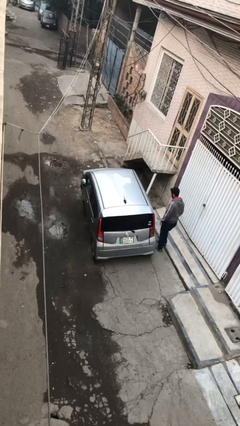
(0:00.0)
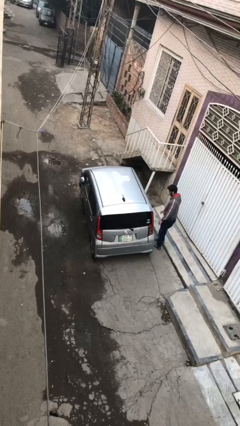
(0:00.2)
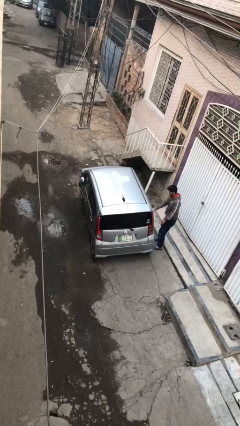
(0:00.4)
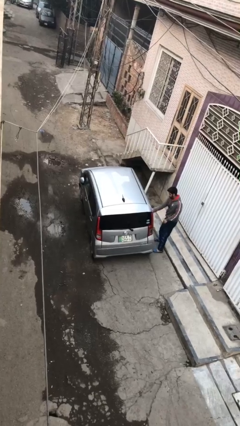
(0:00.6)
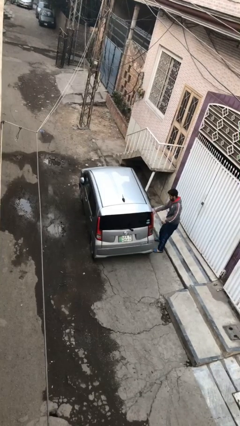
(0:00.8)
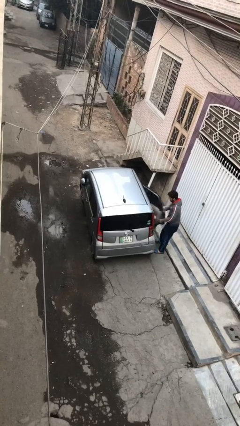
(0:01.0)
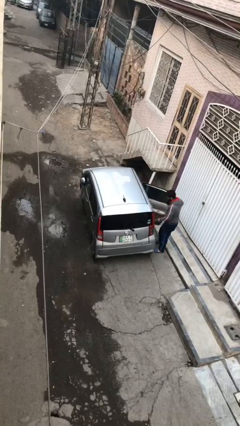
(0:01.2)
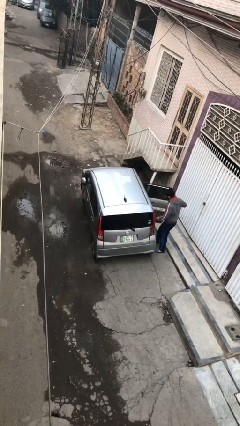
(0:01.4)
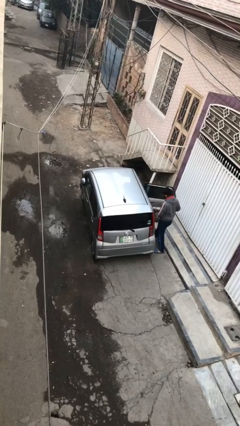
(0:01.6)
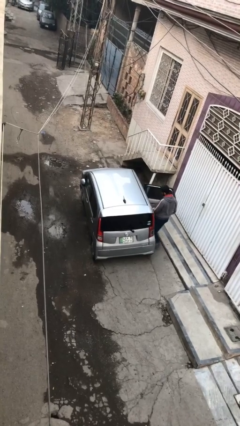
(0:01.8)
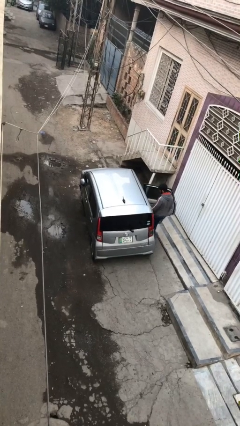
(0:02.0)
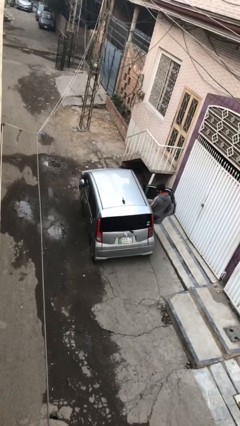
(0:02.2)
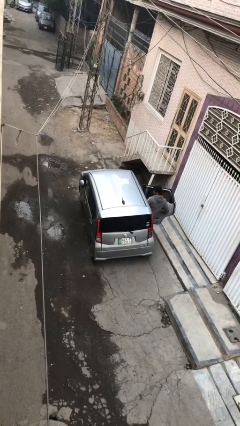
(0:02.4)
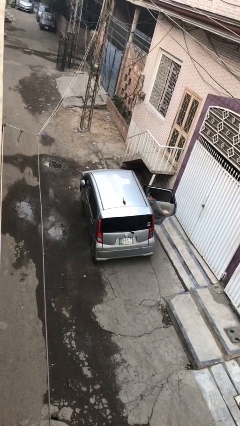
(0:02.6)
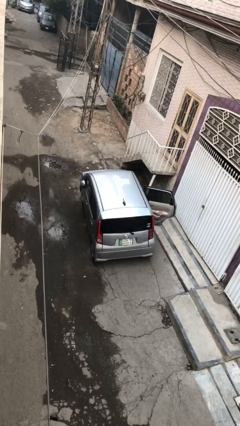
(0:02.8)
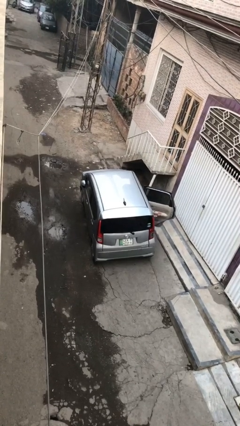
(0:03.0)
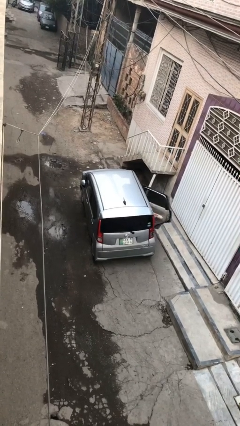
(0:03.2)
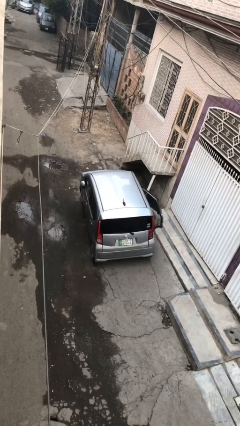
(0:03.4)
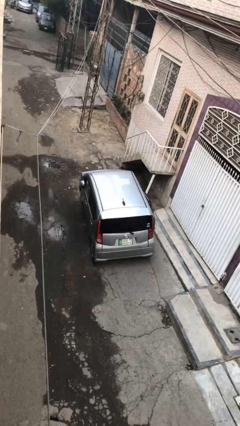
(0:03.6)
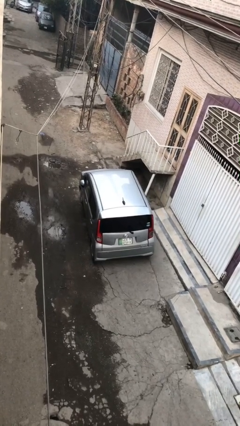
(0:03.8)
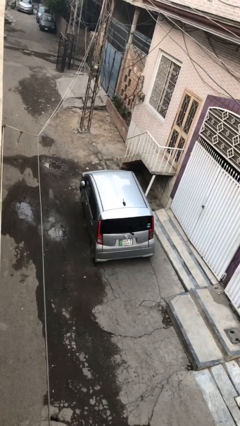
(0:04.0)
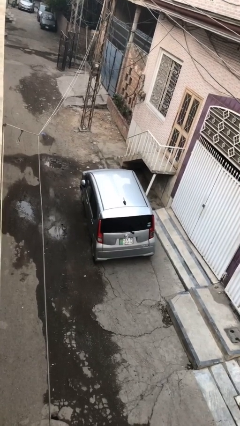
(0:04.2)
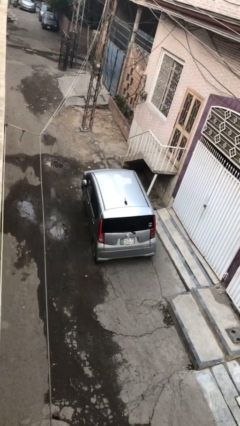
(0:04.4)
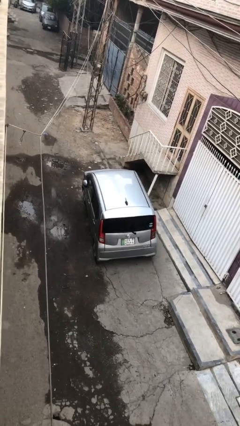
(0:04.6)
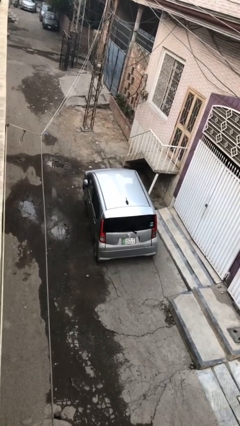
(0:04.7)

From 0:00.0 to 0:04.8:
car picks up person

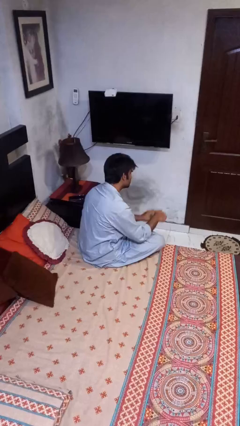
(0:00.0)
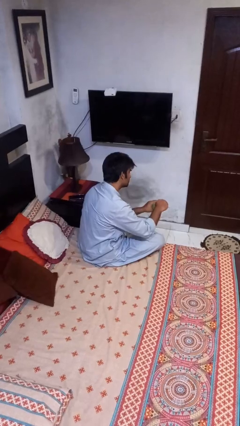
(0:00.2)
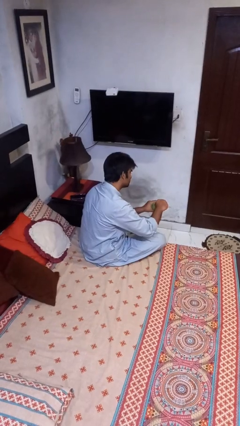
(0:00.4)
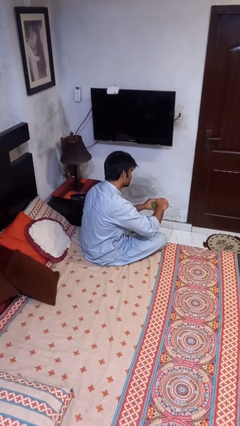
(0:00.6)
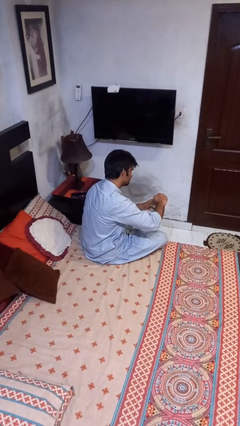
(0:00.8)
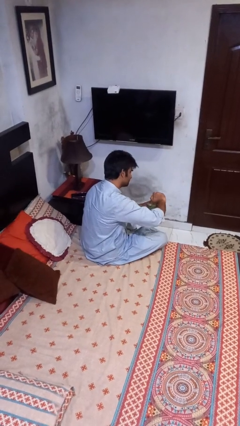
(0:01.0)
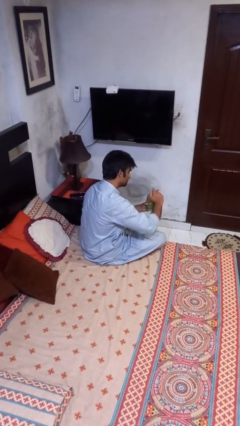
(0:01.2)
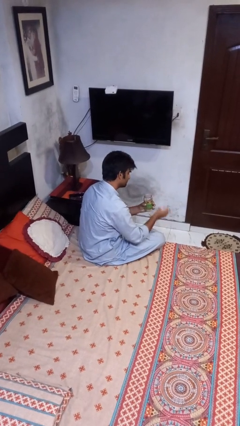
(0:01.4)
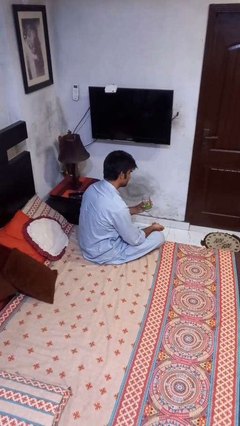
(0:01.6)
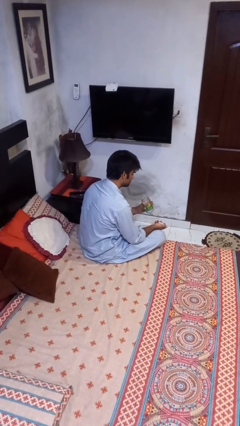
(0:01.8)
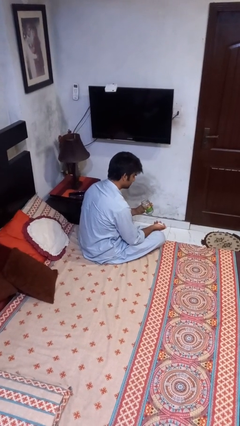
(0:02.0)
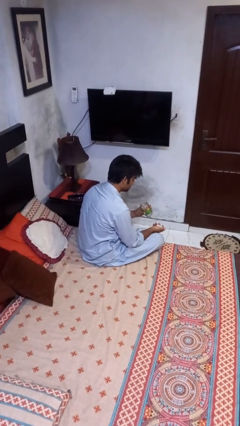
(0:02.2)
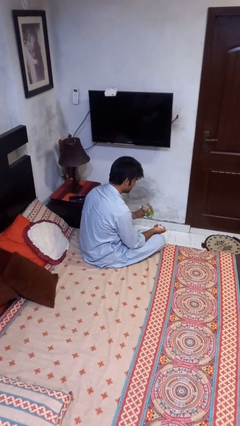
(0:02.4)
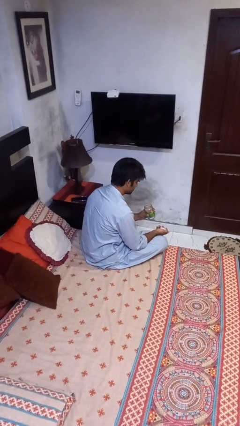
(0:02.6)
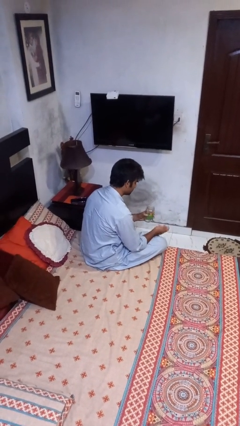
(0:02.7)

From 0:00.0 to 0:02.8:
person opens jar

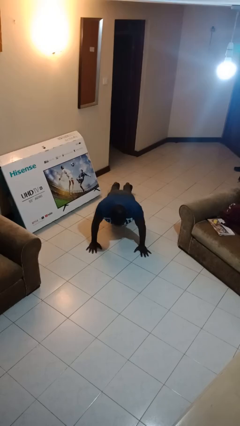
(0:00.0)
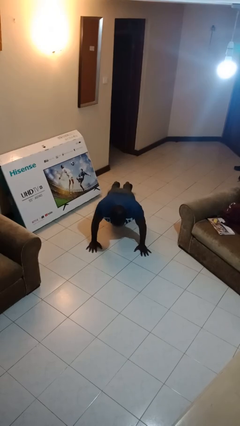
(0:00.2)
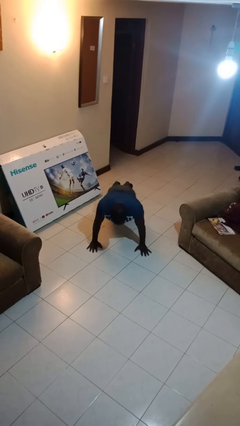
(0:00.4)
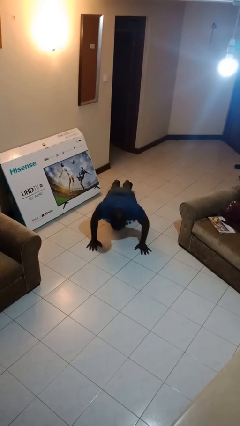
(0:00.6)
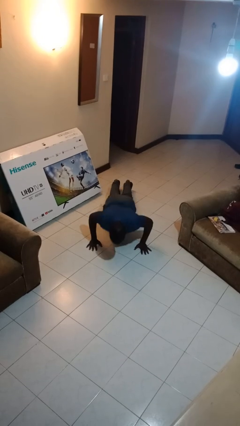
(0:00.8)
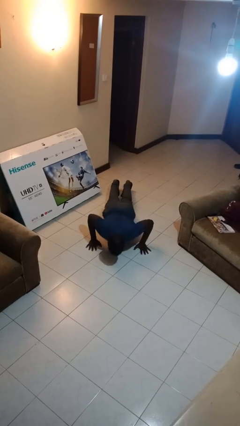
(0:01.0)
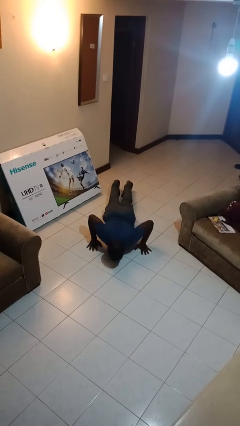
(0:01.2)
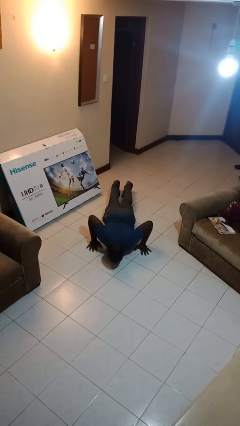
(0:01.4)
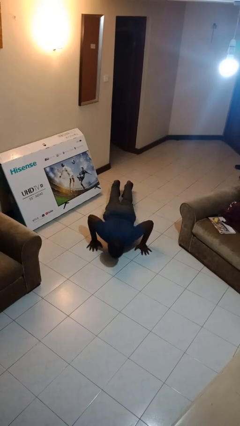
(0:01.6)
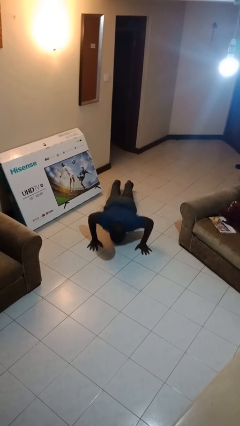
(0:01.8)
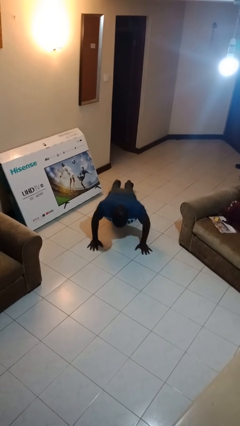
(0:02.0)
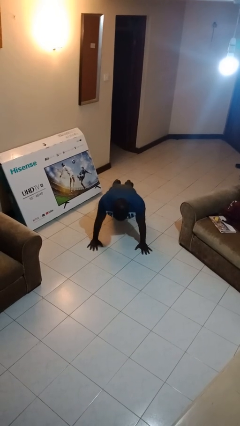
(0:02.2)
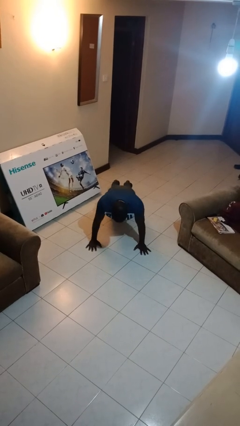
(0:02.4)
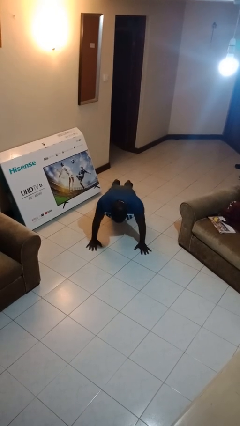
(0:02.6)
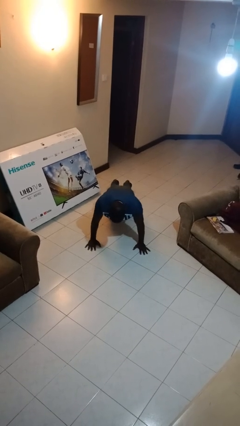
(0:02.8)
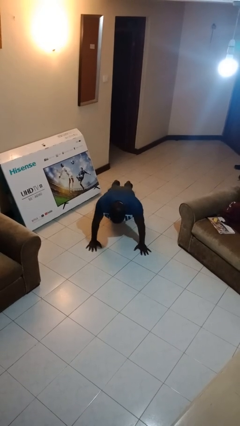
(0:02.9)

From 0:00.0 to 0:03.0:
person exercises with pushup

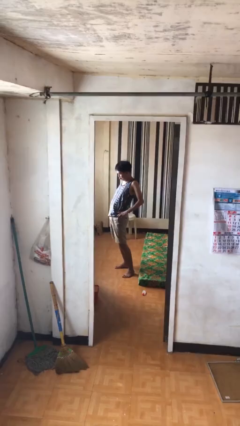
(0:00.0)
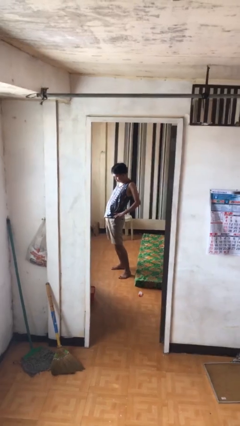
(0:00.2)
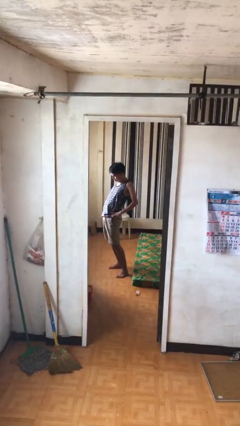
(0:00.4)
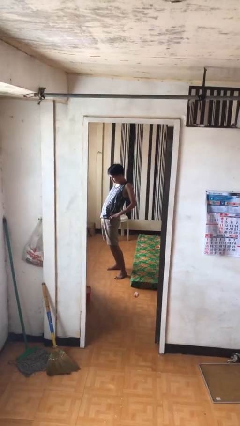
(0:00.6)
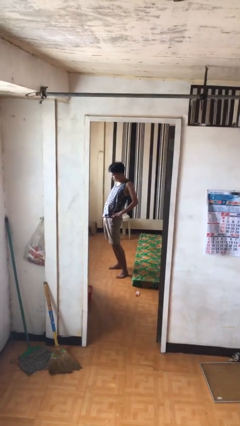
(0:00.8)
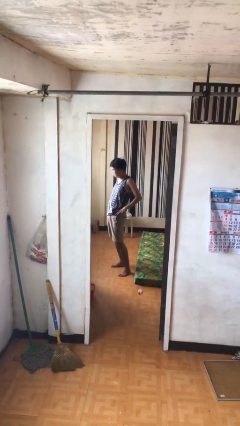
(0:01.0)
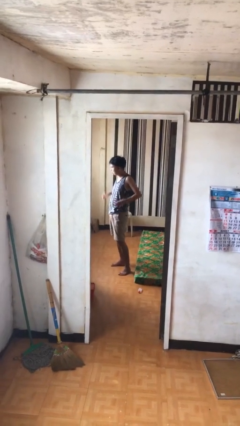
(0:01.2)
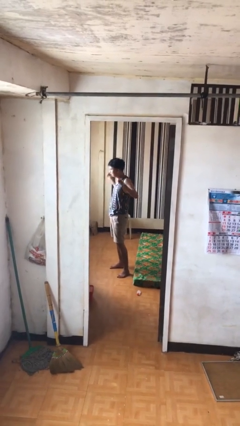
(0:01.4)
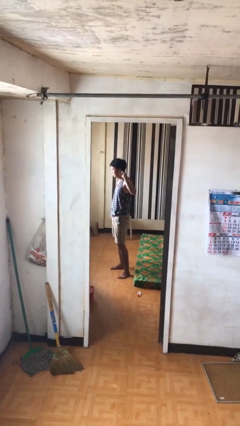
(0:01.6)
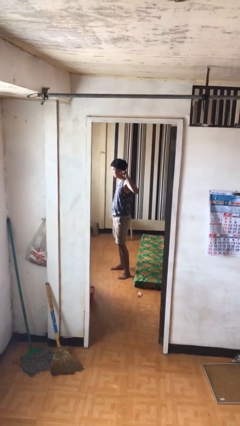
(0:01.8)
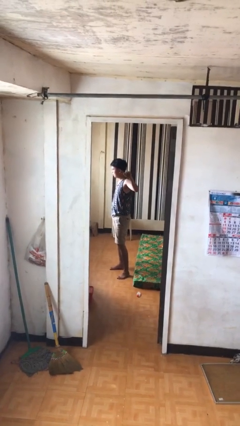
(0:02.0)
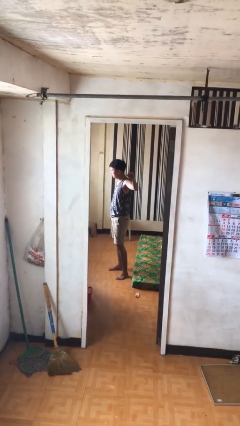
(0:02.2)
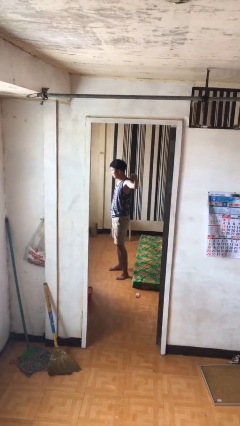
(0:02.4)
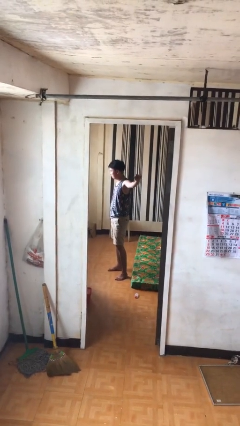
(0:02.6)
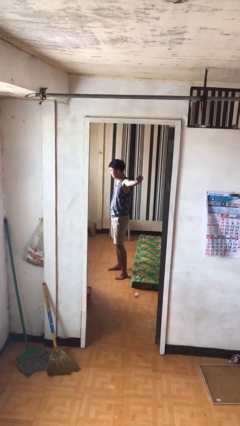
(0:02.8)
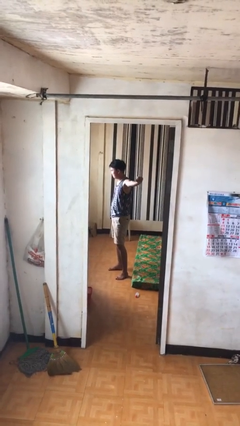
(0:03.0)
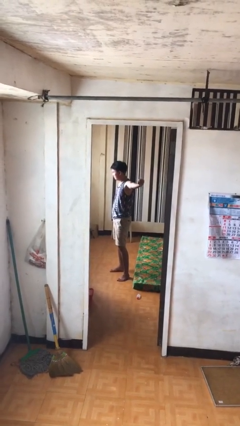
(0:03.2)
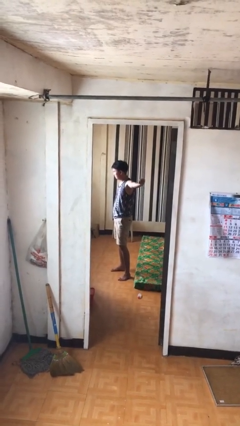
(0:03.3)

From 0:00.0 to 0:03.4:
person stretches arms to side

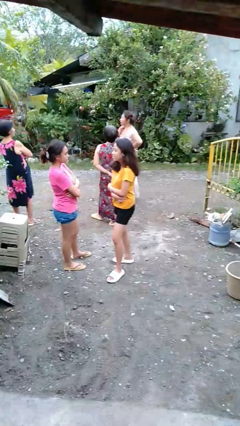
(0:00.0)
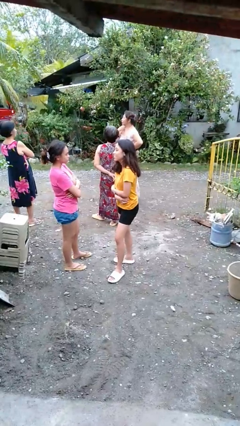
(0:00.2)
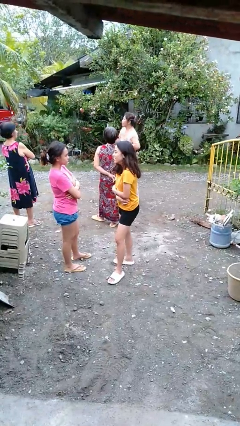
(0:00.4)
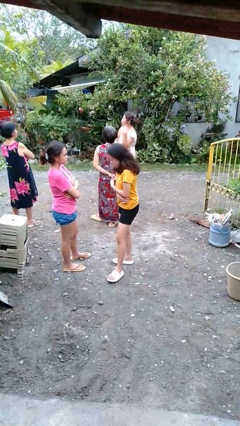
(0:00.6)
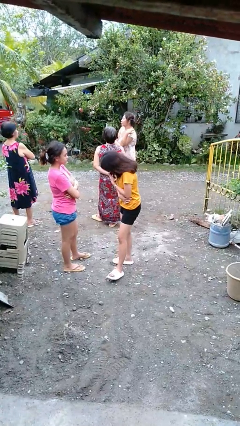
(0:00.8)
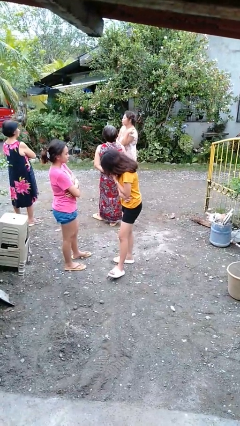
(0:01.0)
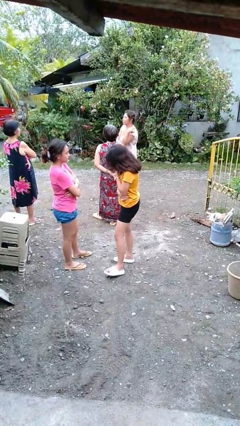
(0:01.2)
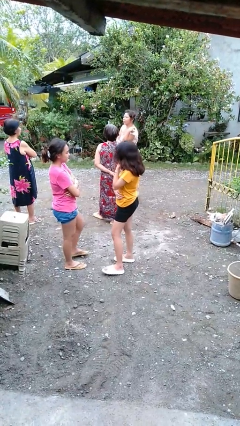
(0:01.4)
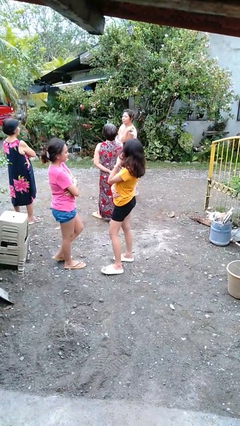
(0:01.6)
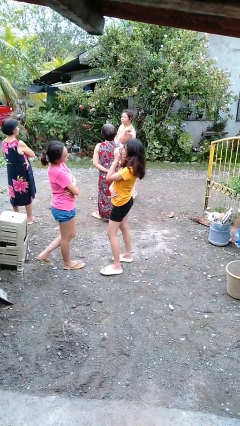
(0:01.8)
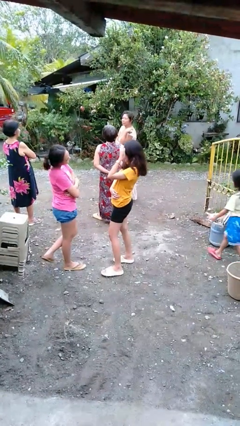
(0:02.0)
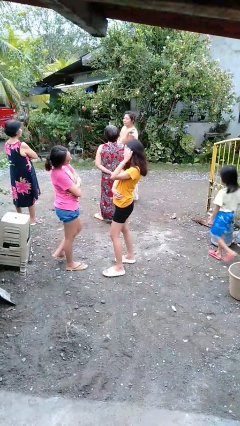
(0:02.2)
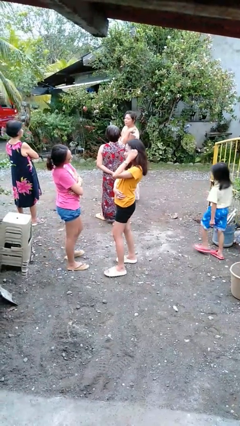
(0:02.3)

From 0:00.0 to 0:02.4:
person laughs with person

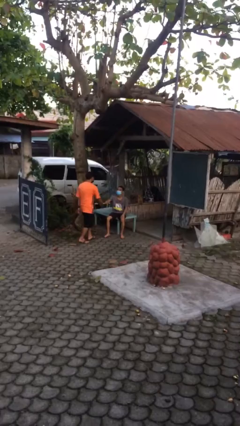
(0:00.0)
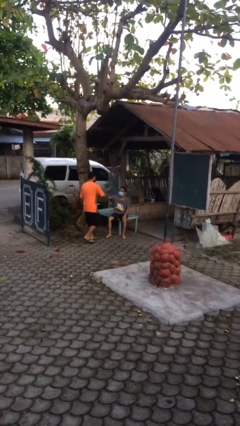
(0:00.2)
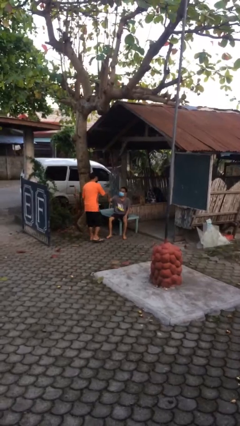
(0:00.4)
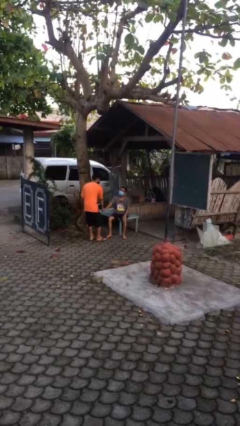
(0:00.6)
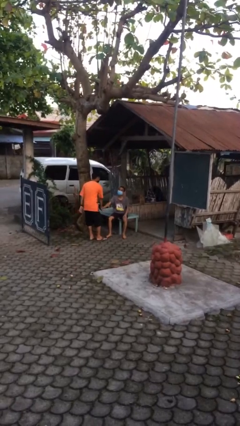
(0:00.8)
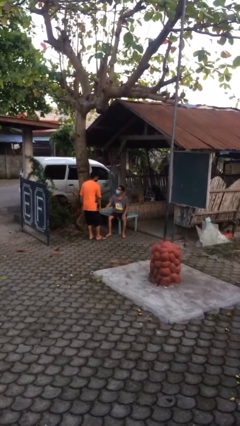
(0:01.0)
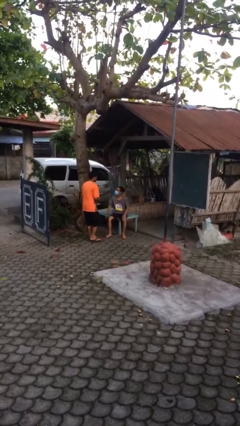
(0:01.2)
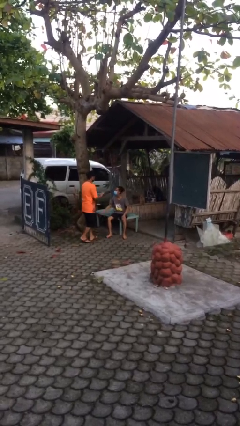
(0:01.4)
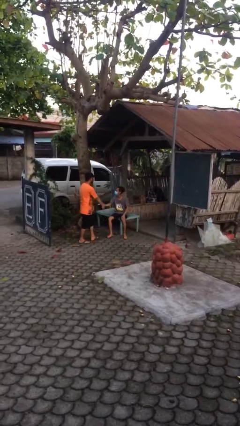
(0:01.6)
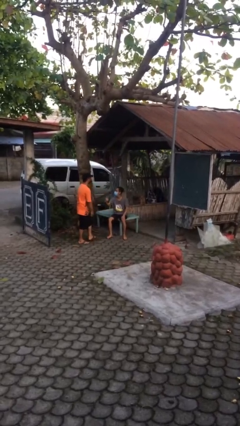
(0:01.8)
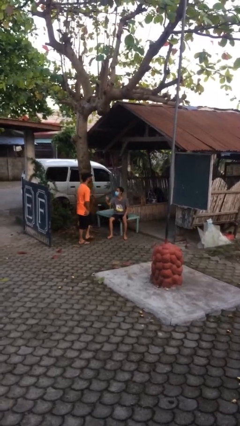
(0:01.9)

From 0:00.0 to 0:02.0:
person shakes hand
